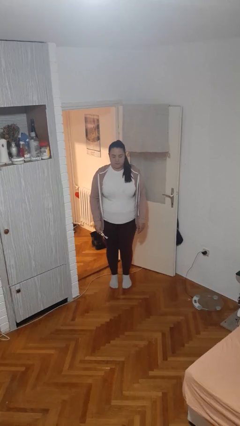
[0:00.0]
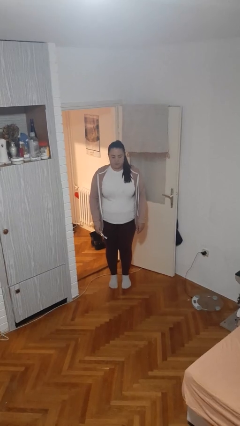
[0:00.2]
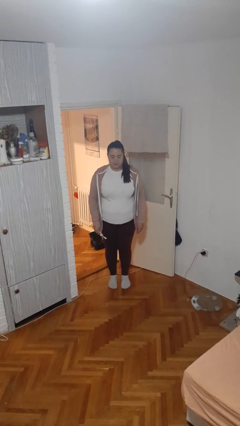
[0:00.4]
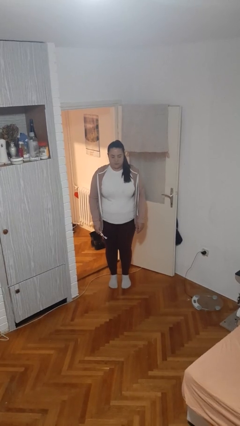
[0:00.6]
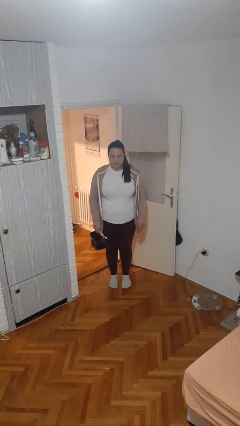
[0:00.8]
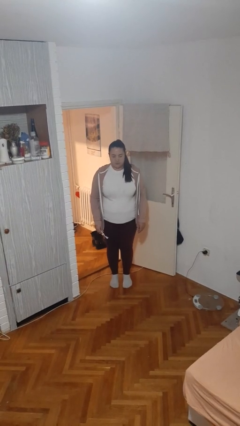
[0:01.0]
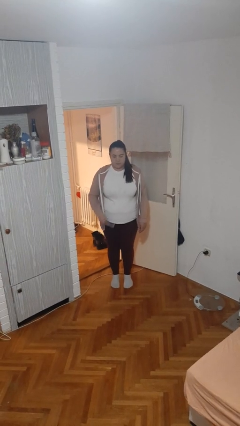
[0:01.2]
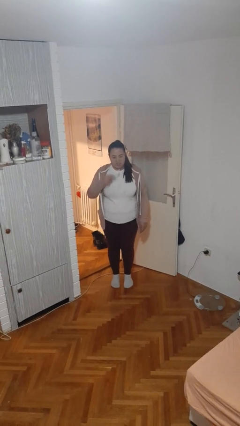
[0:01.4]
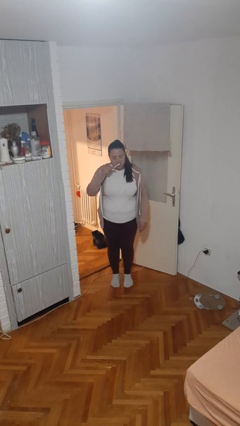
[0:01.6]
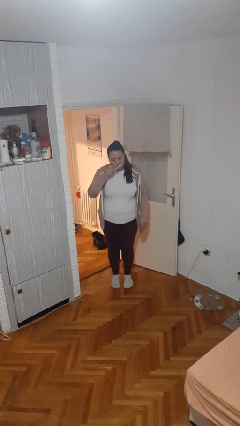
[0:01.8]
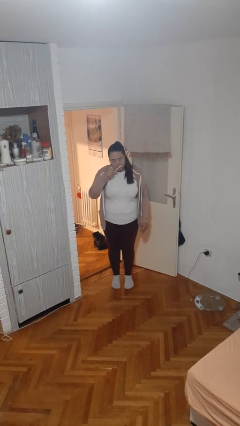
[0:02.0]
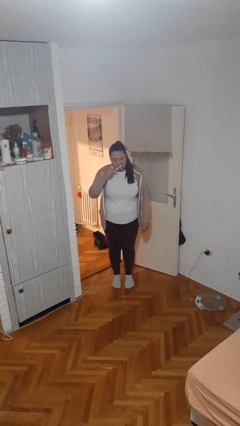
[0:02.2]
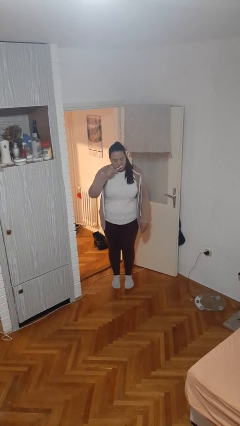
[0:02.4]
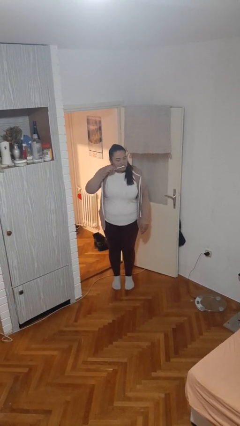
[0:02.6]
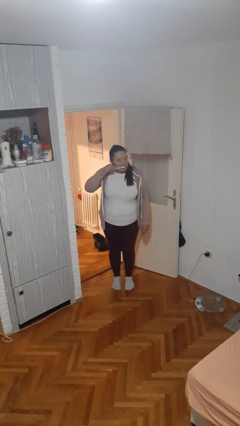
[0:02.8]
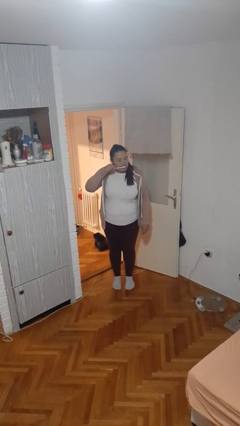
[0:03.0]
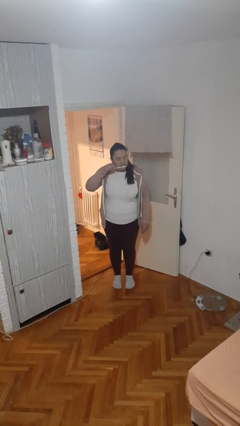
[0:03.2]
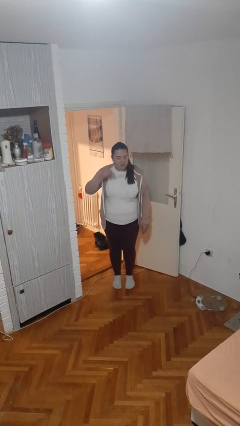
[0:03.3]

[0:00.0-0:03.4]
person brushes hair

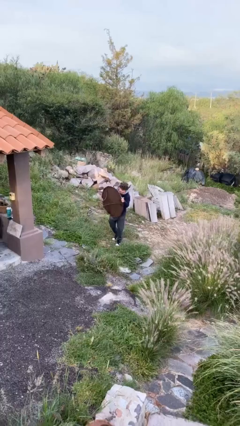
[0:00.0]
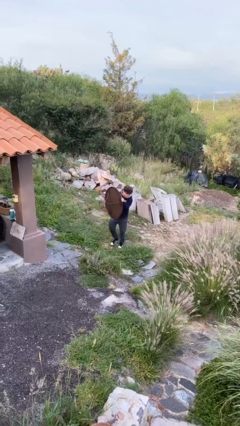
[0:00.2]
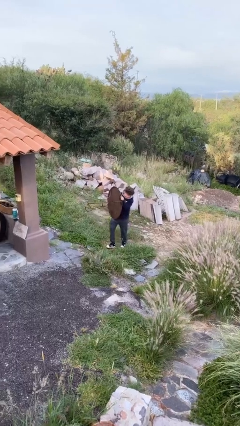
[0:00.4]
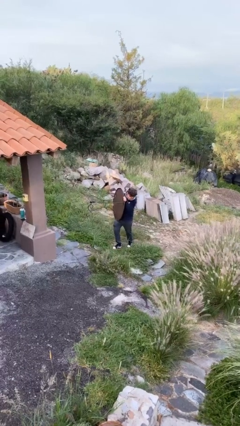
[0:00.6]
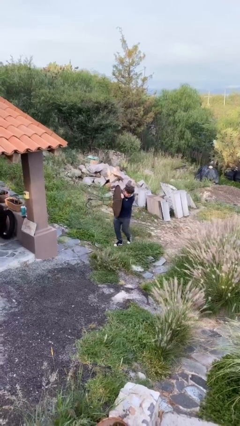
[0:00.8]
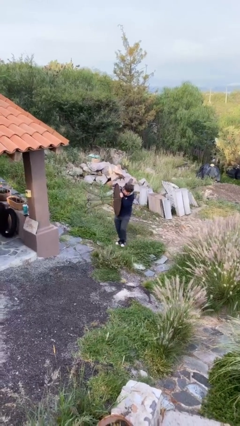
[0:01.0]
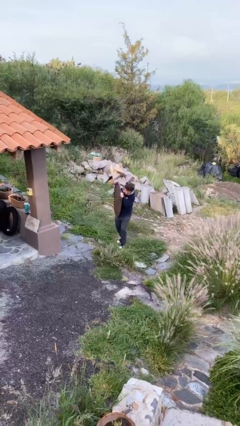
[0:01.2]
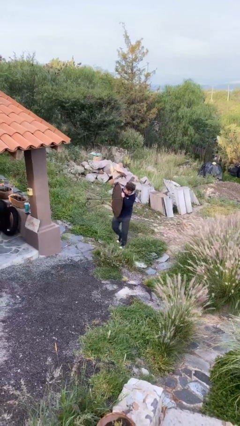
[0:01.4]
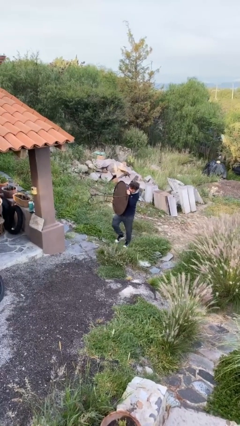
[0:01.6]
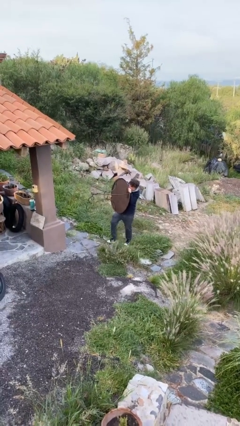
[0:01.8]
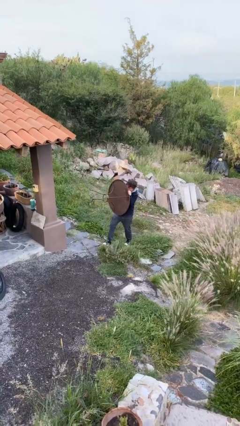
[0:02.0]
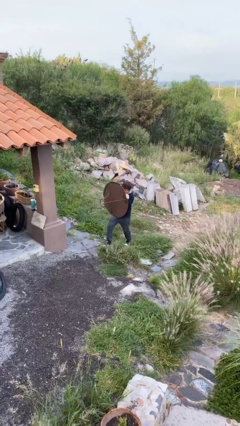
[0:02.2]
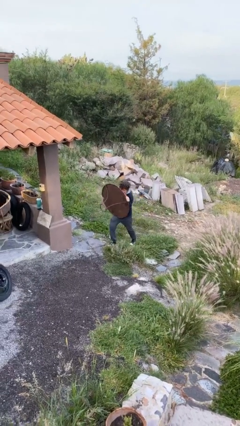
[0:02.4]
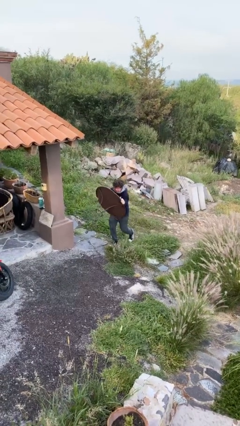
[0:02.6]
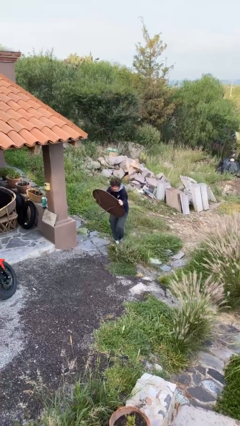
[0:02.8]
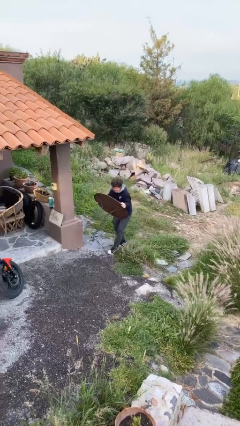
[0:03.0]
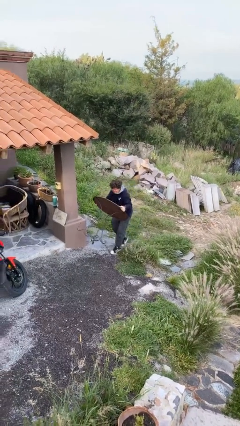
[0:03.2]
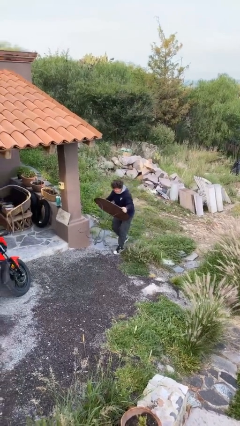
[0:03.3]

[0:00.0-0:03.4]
person carries heavy object

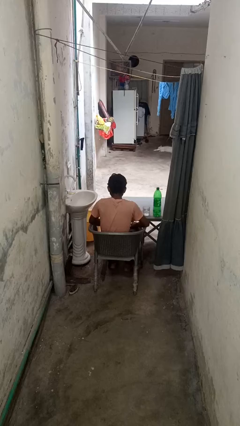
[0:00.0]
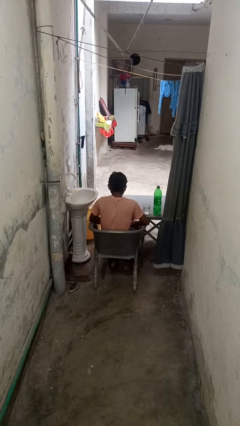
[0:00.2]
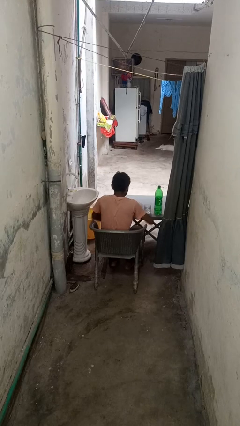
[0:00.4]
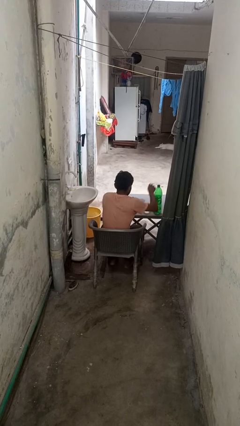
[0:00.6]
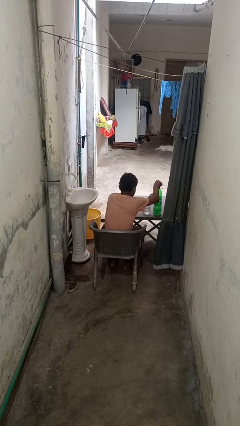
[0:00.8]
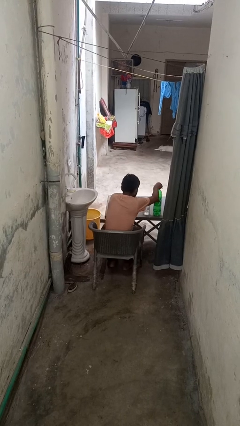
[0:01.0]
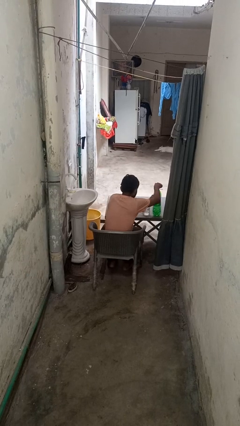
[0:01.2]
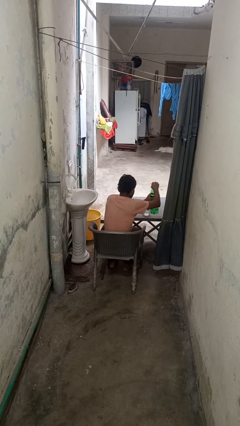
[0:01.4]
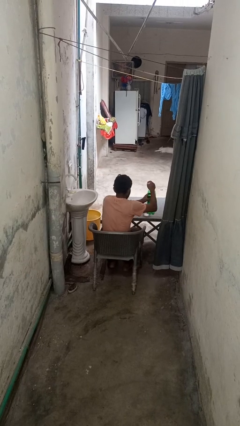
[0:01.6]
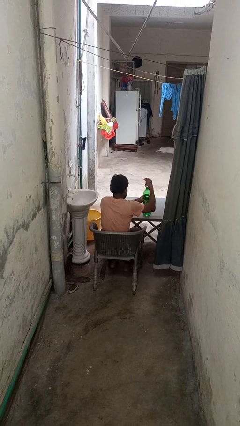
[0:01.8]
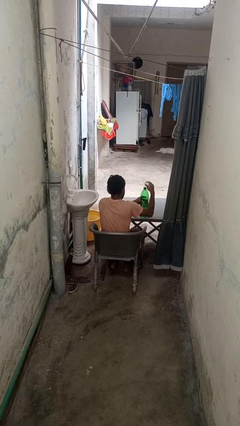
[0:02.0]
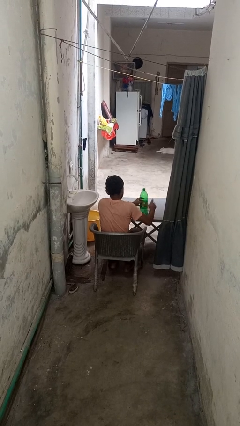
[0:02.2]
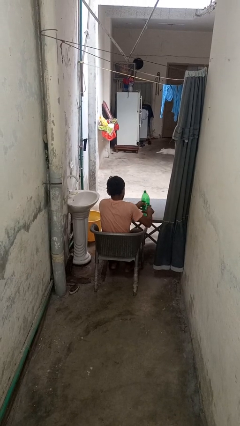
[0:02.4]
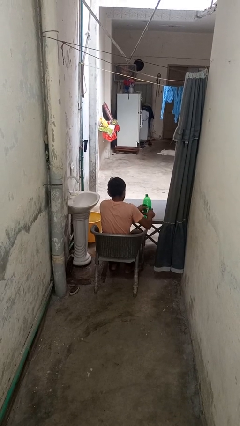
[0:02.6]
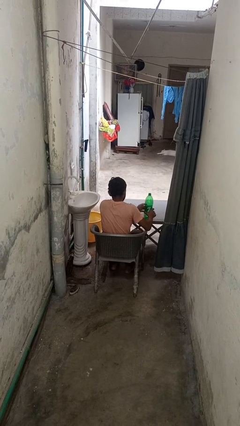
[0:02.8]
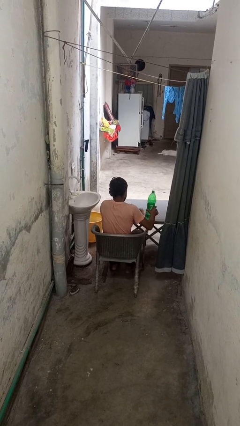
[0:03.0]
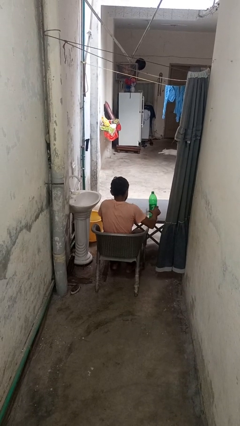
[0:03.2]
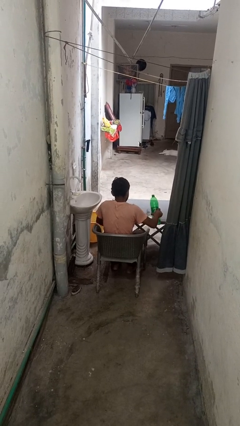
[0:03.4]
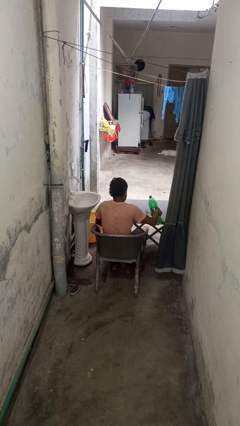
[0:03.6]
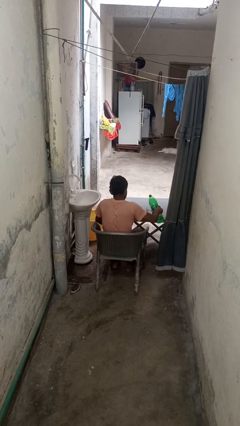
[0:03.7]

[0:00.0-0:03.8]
person unscrews lid from bottle

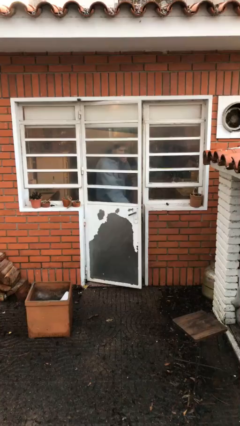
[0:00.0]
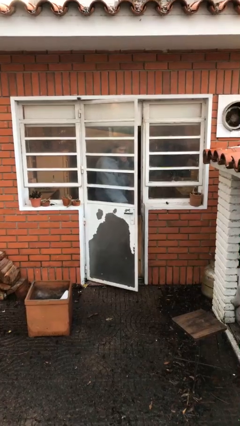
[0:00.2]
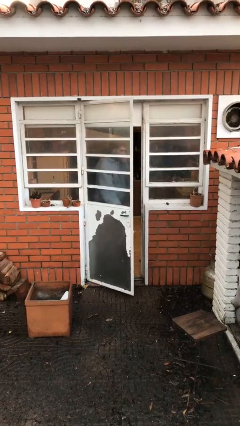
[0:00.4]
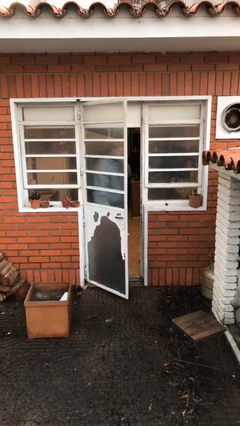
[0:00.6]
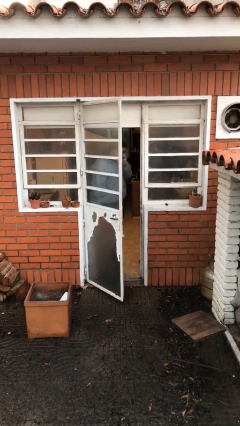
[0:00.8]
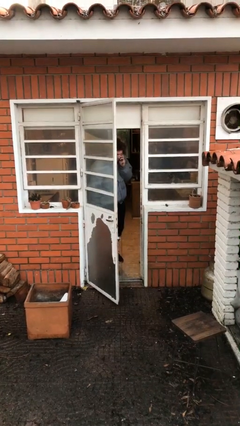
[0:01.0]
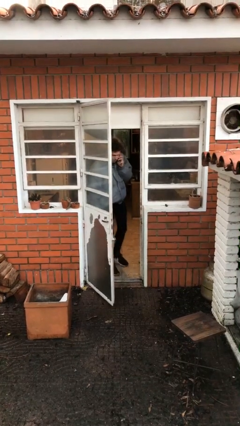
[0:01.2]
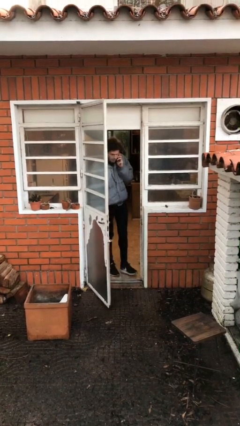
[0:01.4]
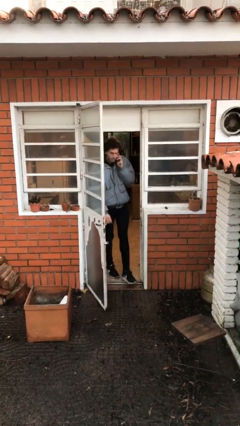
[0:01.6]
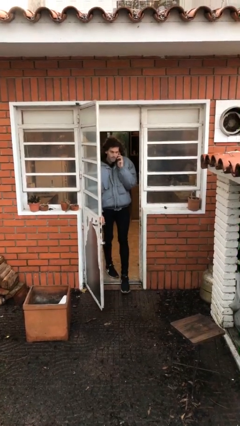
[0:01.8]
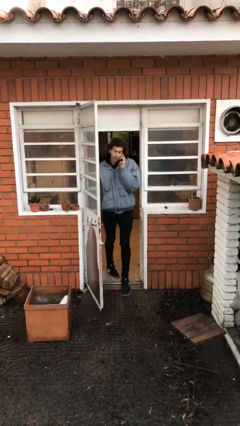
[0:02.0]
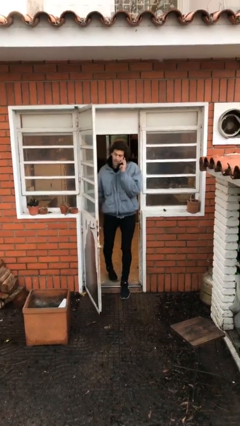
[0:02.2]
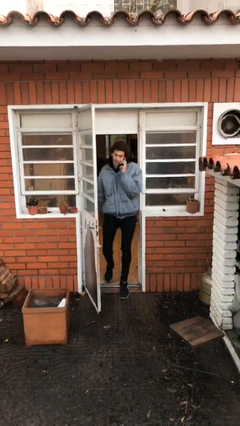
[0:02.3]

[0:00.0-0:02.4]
person opens facility door

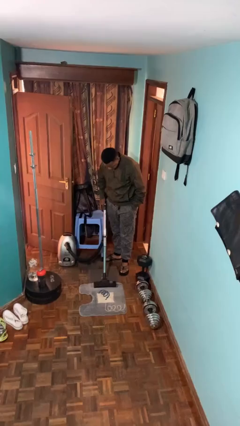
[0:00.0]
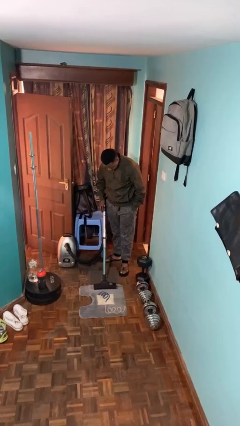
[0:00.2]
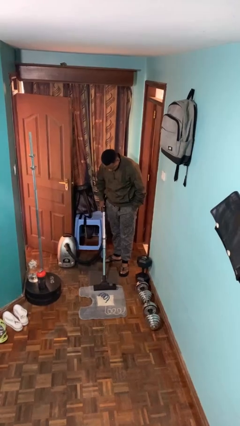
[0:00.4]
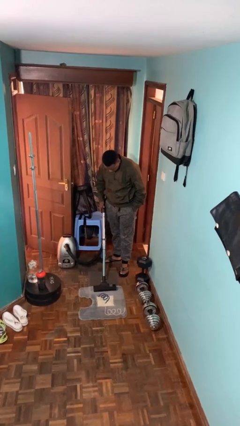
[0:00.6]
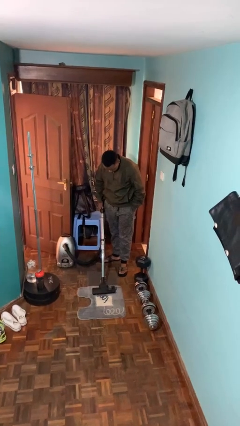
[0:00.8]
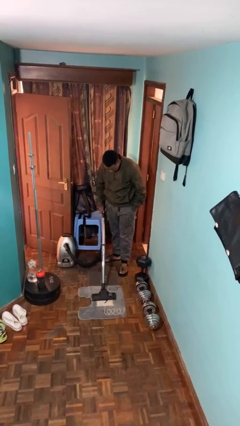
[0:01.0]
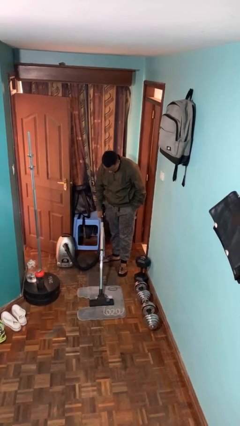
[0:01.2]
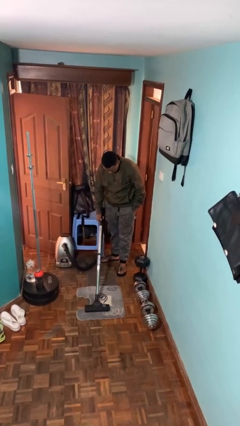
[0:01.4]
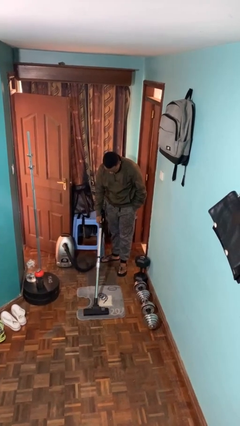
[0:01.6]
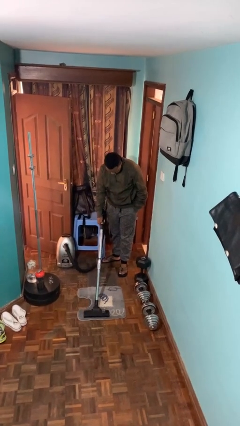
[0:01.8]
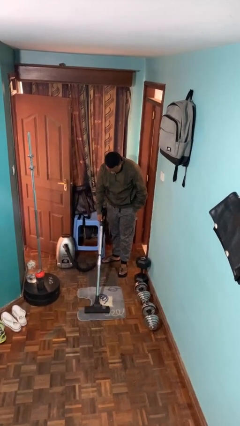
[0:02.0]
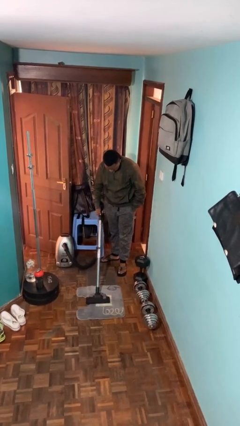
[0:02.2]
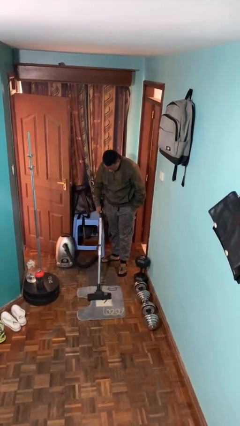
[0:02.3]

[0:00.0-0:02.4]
person vacuums carpet

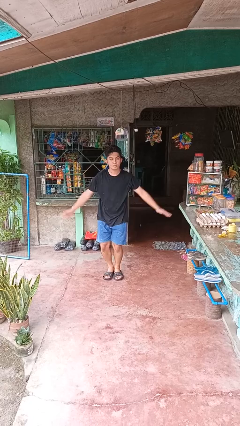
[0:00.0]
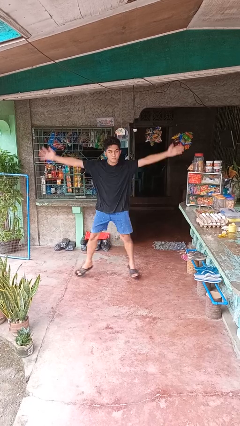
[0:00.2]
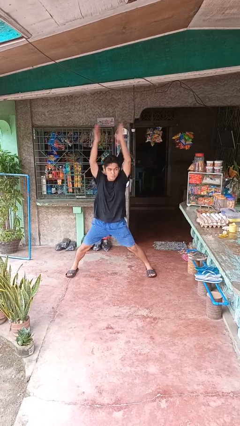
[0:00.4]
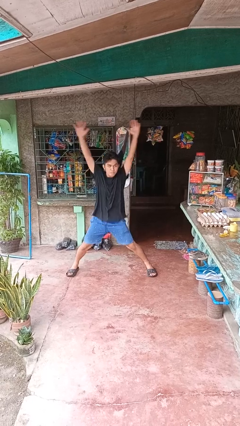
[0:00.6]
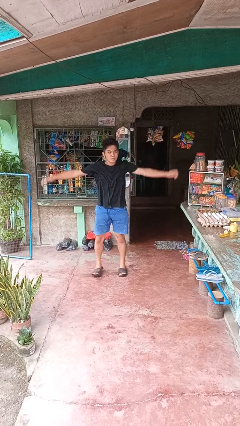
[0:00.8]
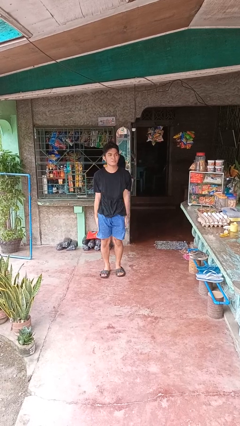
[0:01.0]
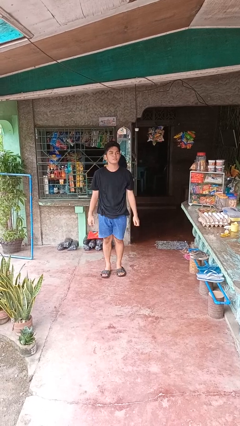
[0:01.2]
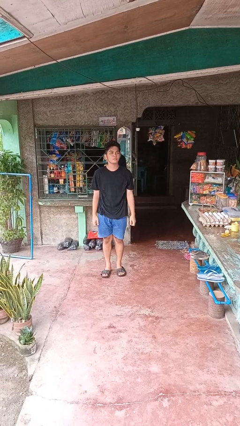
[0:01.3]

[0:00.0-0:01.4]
person exercises with jumping jacks

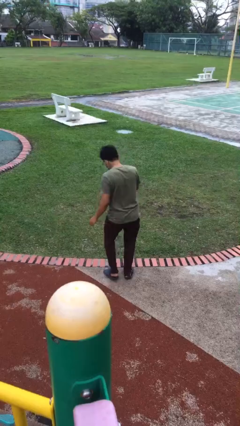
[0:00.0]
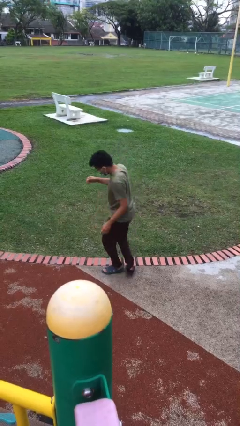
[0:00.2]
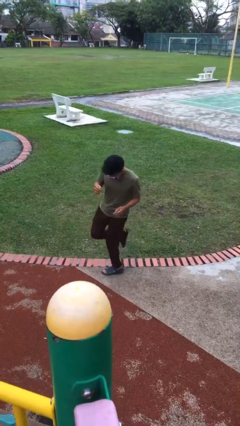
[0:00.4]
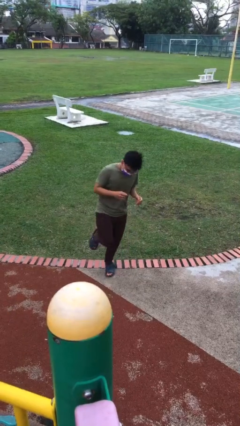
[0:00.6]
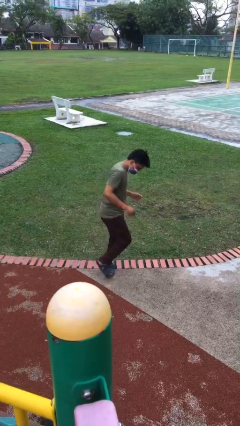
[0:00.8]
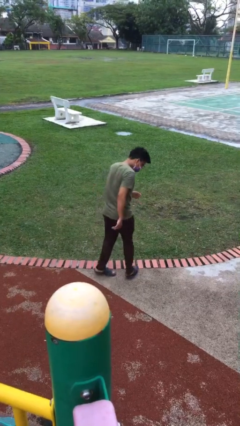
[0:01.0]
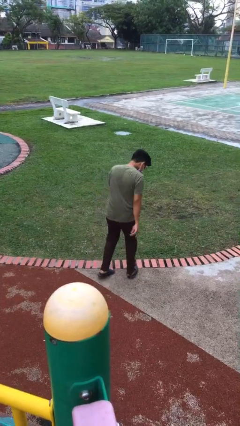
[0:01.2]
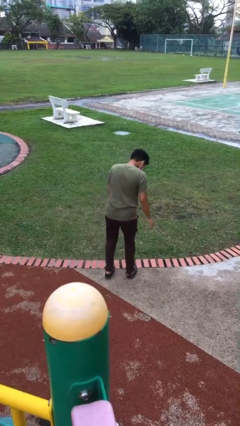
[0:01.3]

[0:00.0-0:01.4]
person twirls
